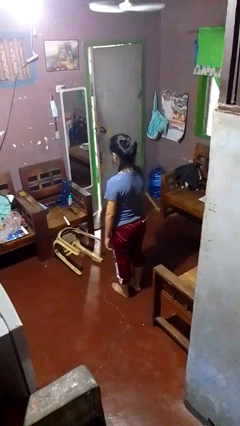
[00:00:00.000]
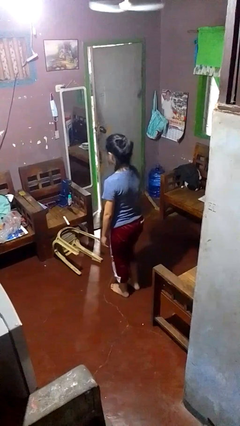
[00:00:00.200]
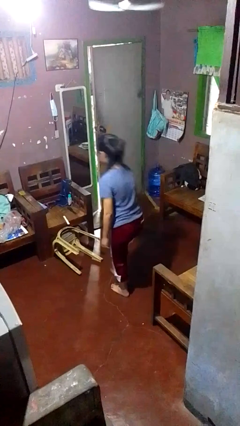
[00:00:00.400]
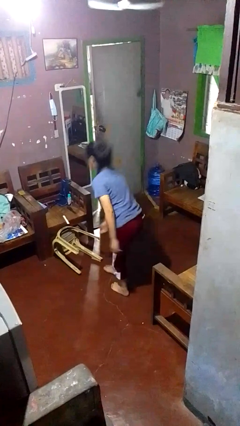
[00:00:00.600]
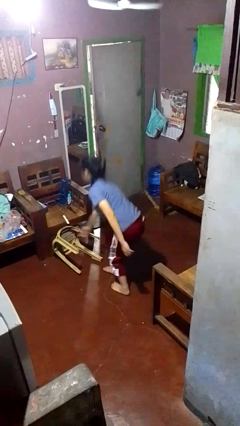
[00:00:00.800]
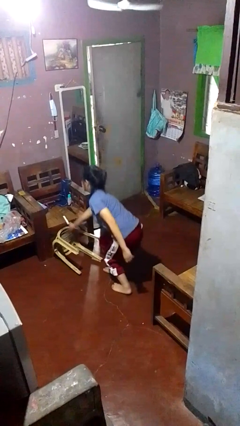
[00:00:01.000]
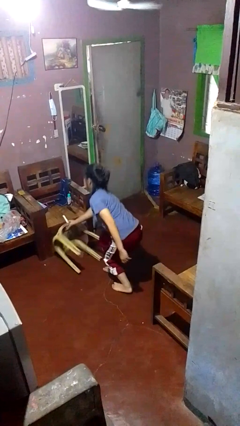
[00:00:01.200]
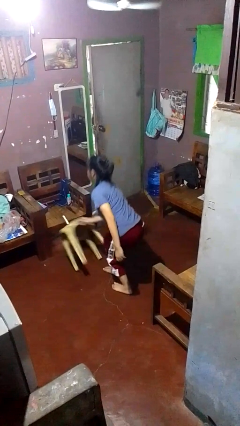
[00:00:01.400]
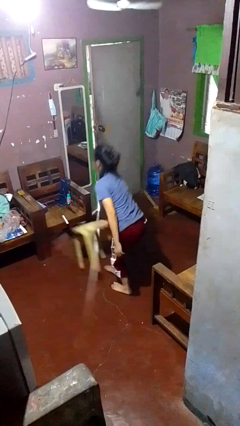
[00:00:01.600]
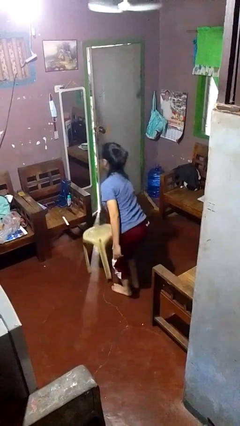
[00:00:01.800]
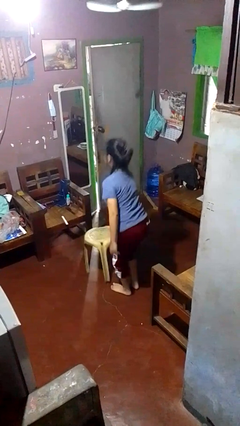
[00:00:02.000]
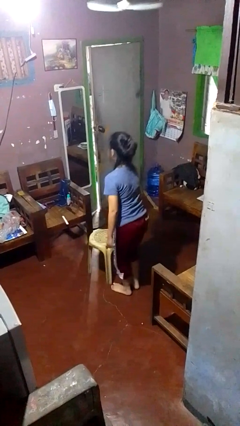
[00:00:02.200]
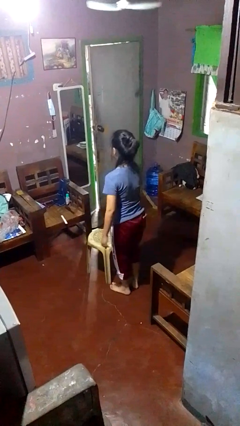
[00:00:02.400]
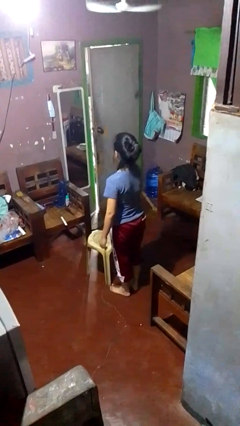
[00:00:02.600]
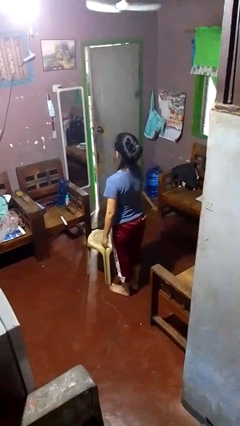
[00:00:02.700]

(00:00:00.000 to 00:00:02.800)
person sets upright furniture

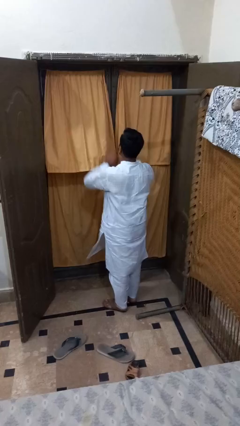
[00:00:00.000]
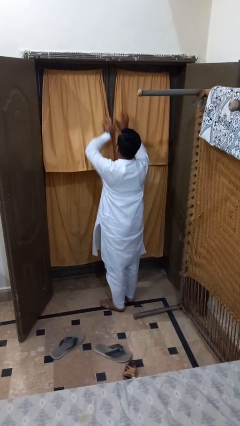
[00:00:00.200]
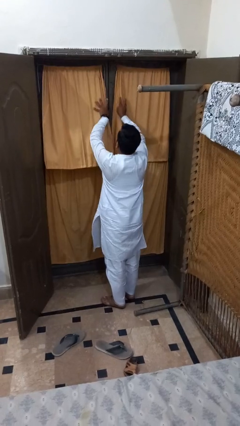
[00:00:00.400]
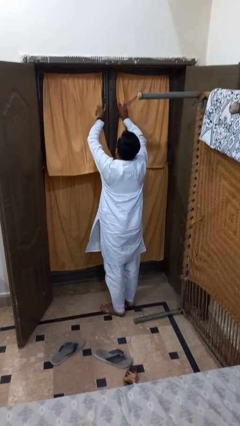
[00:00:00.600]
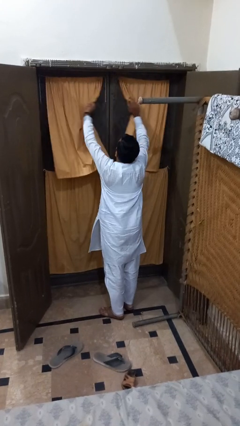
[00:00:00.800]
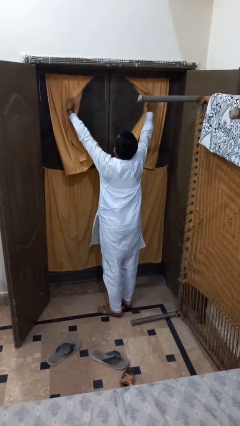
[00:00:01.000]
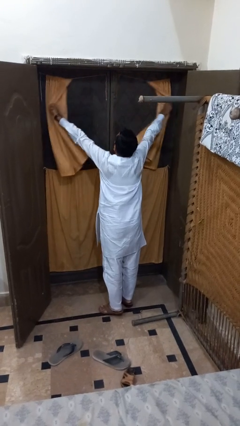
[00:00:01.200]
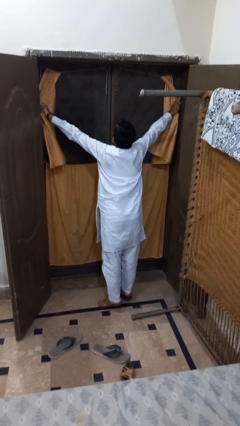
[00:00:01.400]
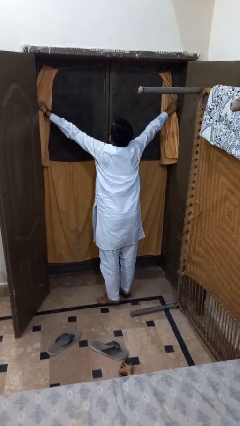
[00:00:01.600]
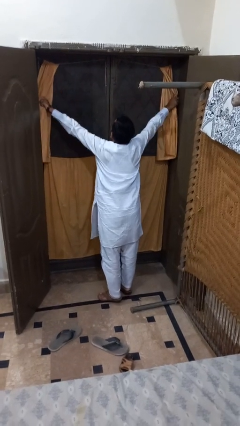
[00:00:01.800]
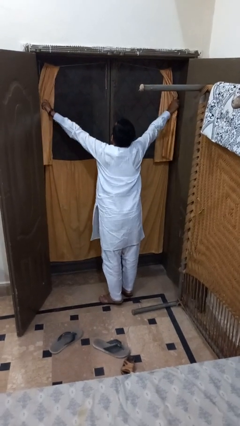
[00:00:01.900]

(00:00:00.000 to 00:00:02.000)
person opens curtains

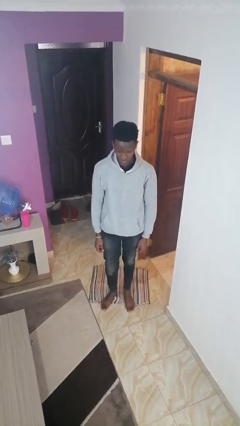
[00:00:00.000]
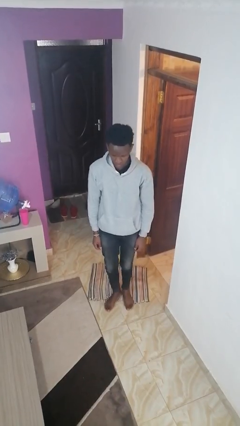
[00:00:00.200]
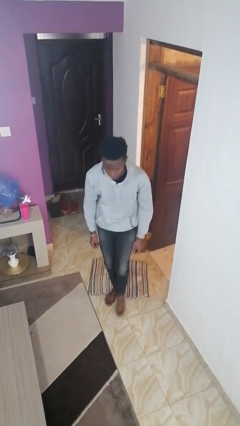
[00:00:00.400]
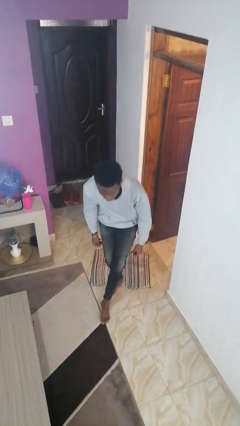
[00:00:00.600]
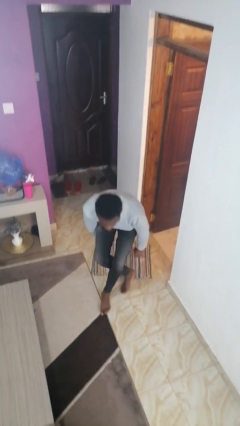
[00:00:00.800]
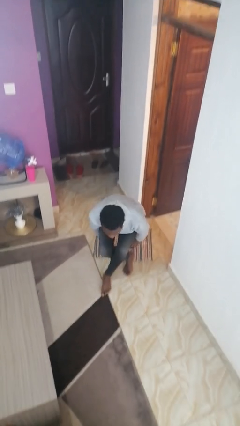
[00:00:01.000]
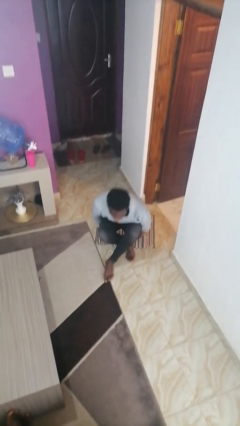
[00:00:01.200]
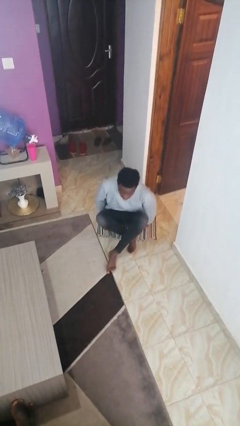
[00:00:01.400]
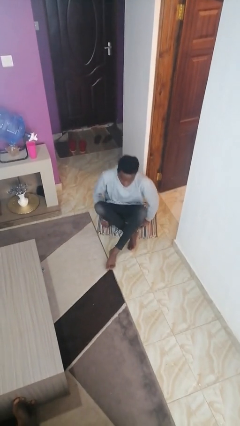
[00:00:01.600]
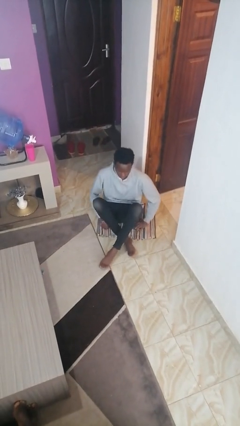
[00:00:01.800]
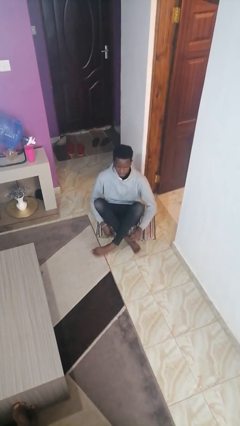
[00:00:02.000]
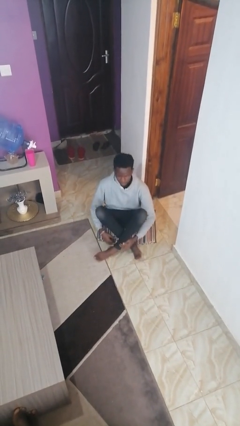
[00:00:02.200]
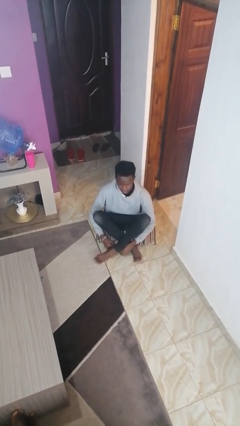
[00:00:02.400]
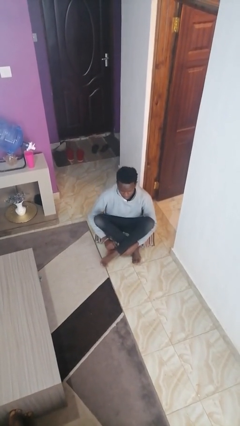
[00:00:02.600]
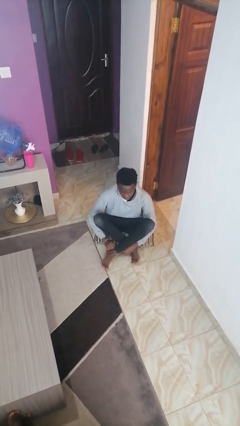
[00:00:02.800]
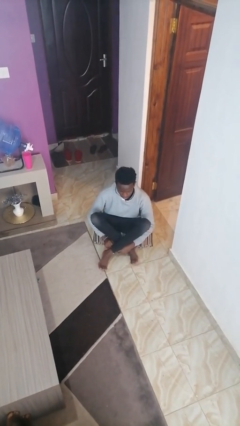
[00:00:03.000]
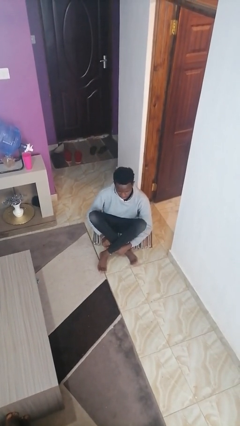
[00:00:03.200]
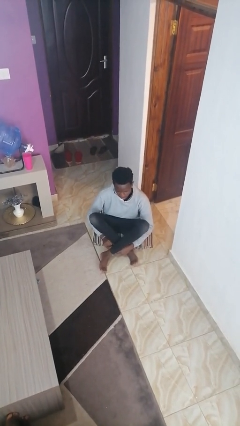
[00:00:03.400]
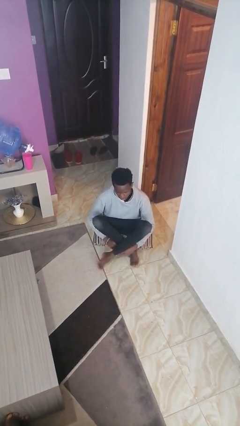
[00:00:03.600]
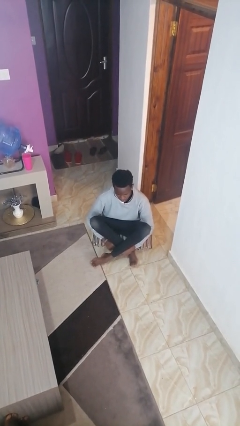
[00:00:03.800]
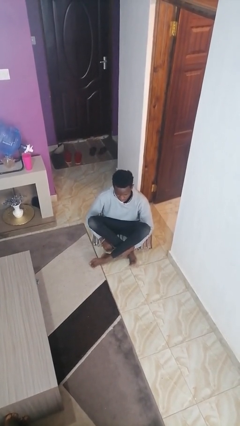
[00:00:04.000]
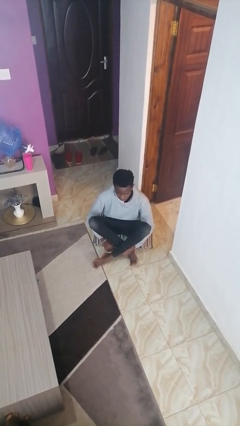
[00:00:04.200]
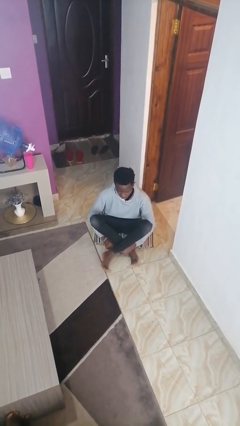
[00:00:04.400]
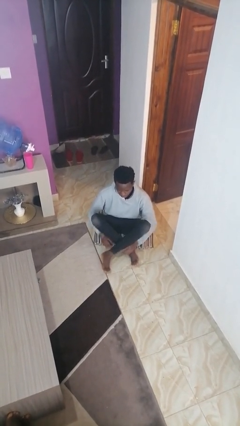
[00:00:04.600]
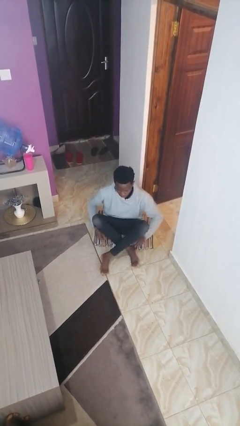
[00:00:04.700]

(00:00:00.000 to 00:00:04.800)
person sits crisscross

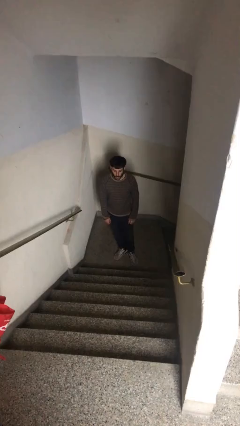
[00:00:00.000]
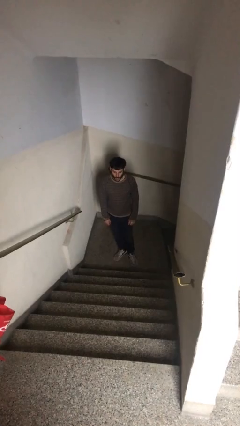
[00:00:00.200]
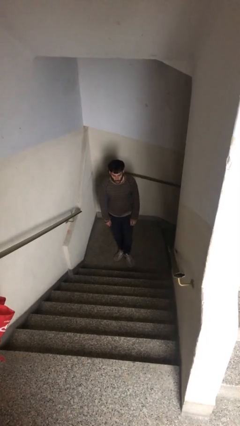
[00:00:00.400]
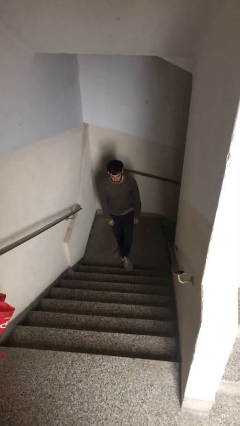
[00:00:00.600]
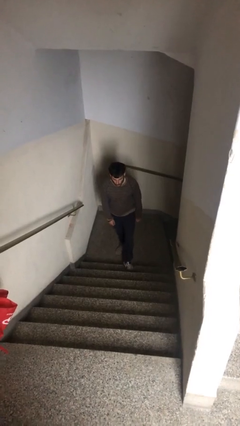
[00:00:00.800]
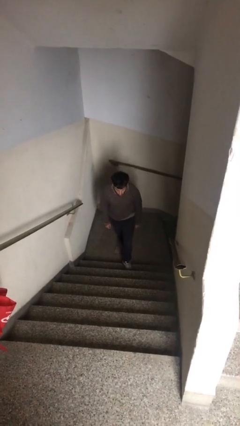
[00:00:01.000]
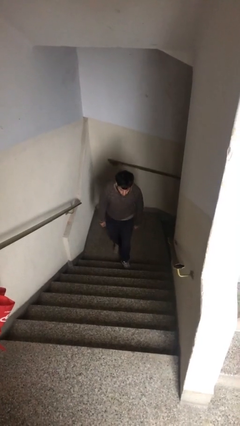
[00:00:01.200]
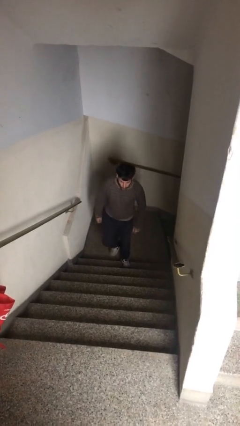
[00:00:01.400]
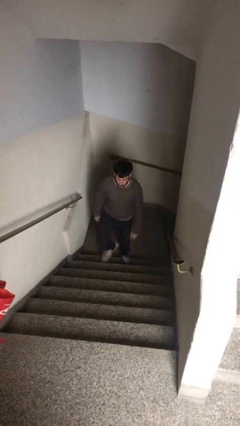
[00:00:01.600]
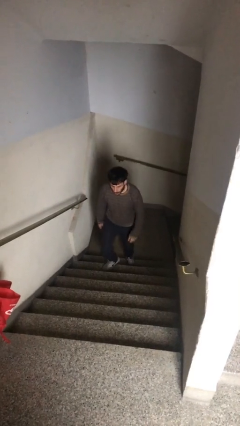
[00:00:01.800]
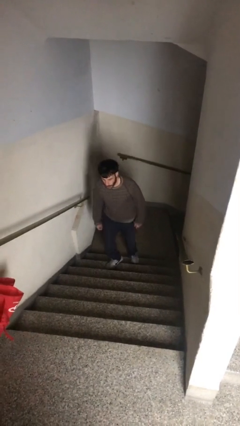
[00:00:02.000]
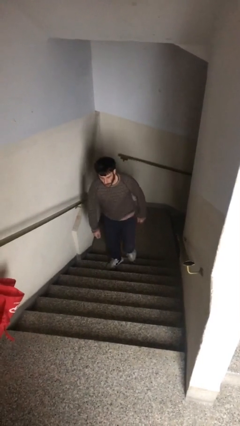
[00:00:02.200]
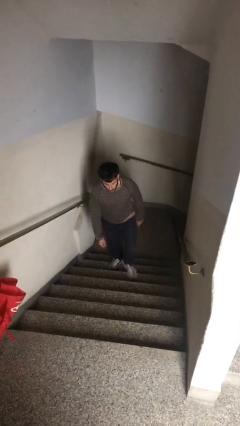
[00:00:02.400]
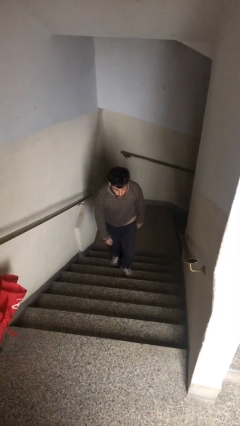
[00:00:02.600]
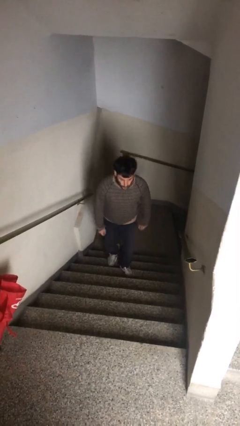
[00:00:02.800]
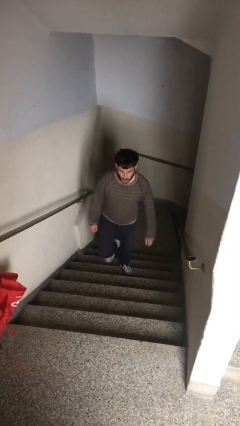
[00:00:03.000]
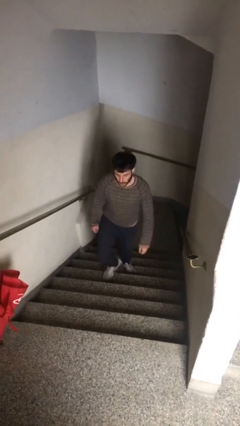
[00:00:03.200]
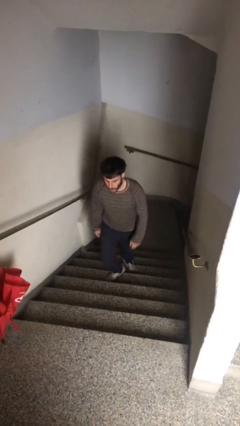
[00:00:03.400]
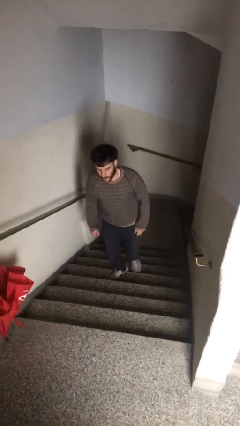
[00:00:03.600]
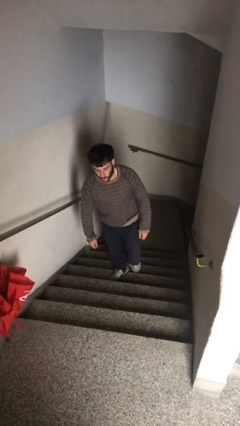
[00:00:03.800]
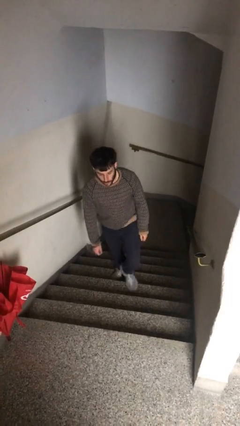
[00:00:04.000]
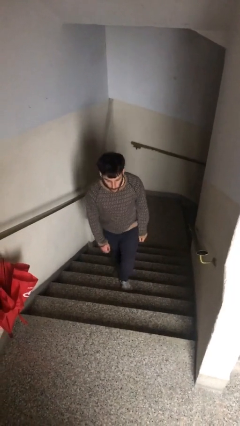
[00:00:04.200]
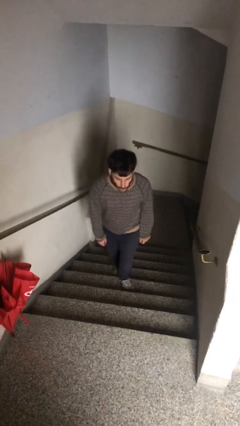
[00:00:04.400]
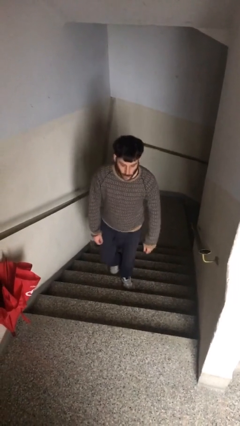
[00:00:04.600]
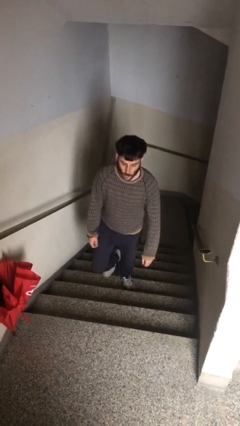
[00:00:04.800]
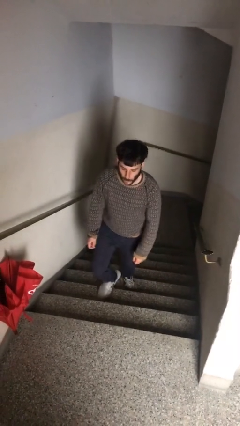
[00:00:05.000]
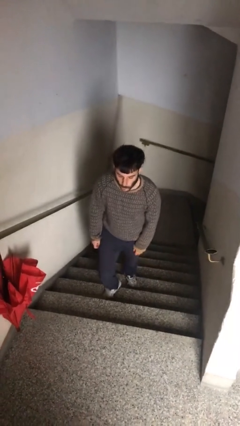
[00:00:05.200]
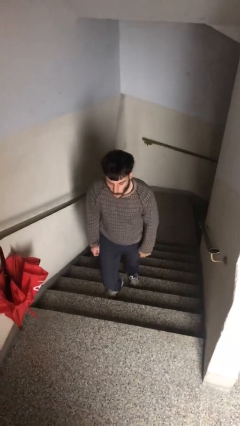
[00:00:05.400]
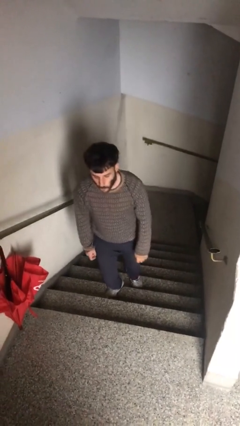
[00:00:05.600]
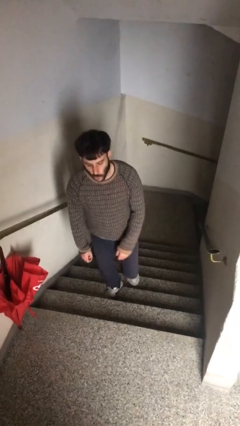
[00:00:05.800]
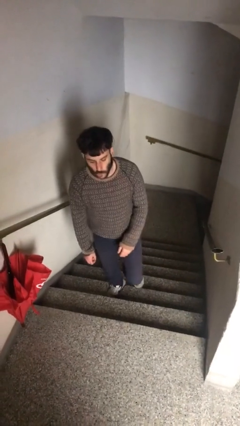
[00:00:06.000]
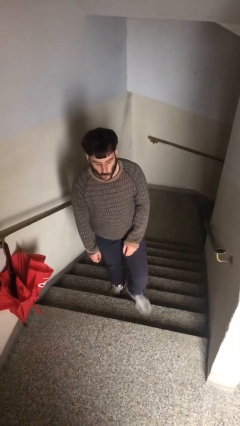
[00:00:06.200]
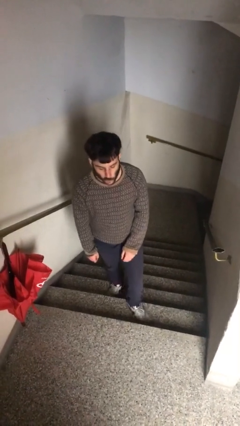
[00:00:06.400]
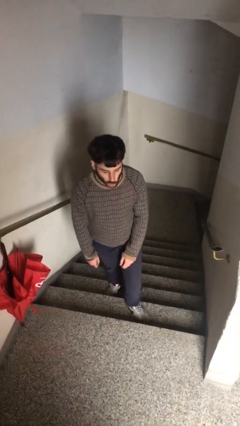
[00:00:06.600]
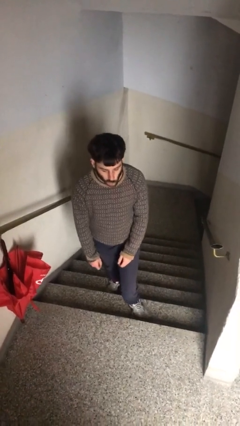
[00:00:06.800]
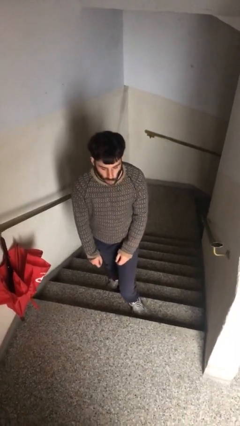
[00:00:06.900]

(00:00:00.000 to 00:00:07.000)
person climbs up stairs

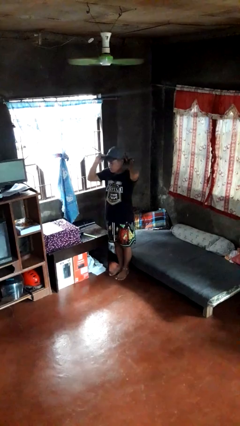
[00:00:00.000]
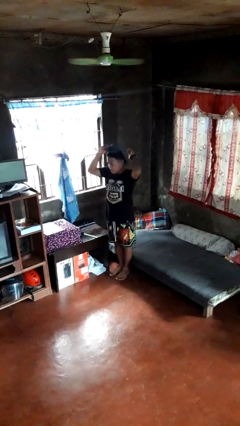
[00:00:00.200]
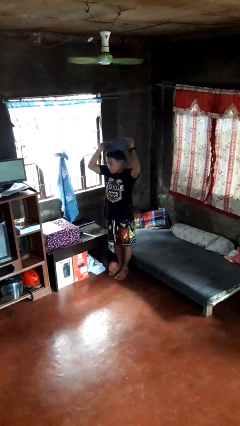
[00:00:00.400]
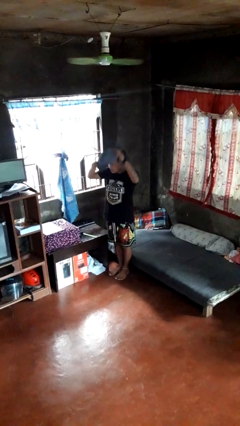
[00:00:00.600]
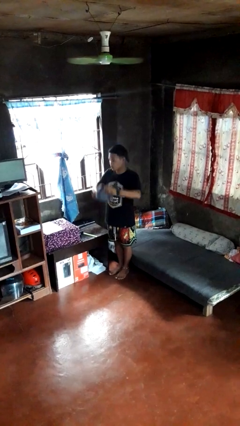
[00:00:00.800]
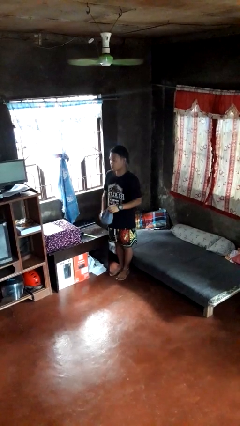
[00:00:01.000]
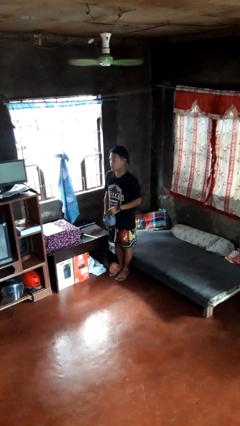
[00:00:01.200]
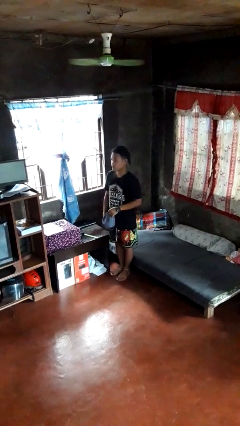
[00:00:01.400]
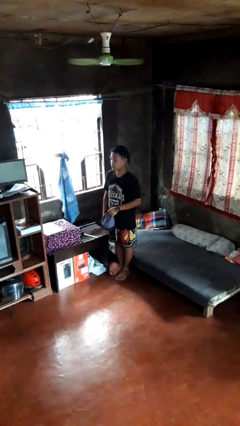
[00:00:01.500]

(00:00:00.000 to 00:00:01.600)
person takes off hat
